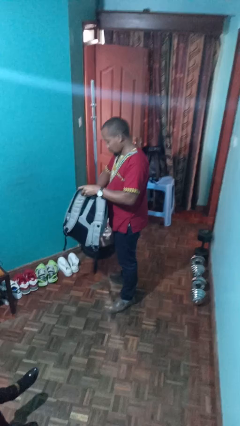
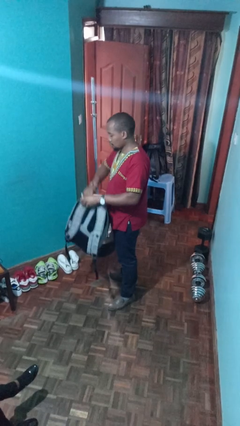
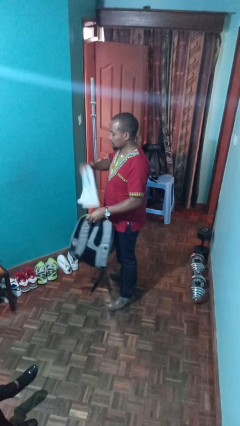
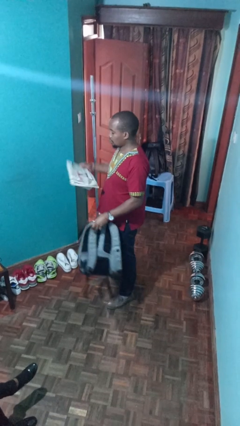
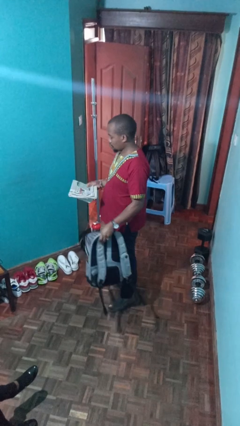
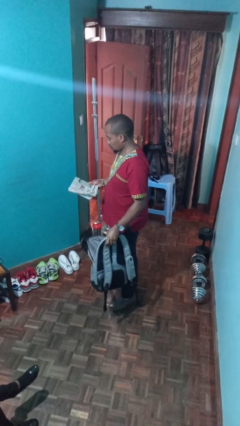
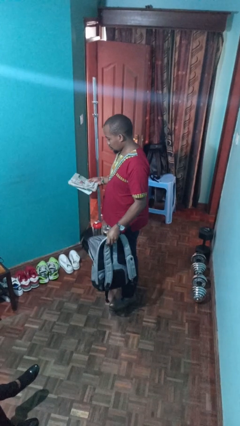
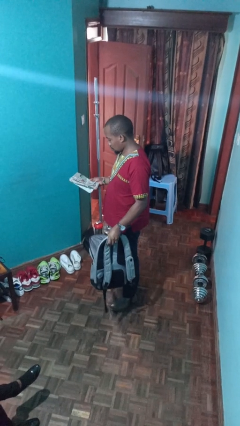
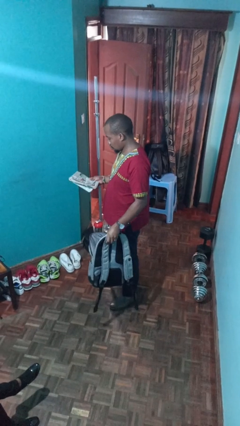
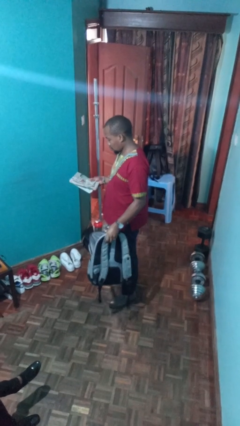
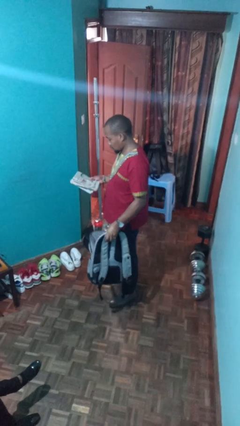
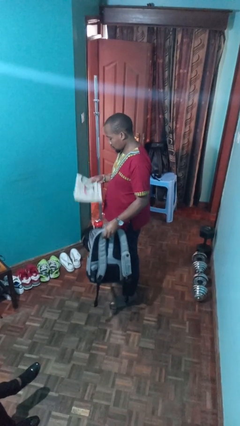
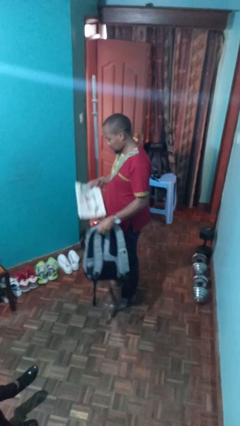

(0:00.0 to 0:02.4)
person takes object from backpack

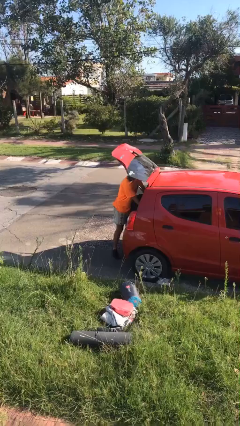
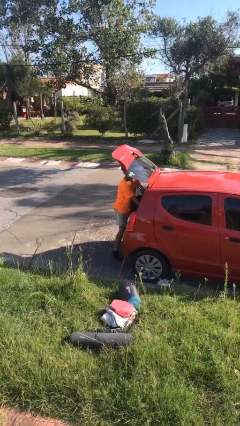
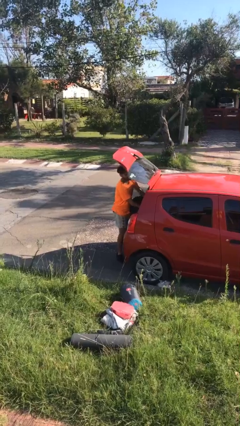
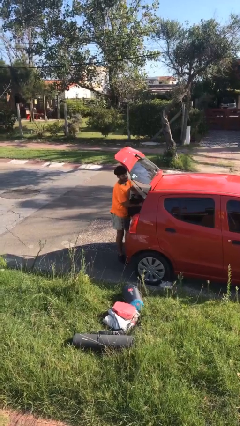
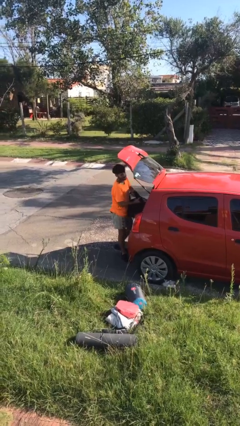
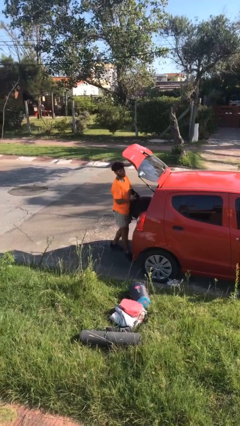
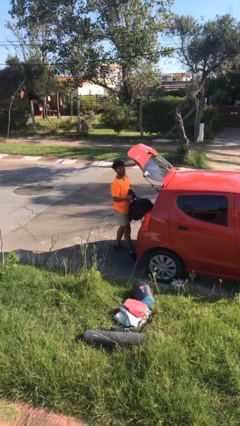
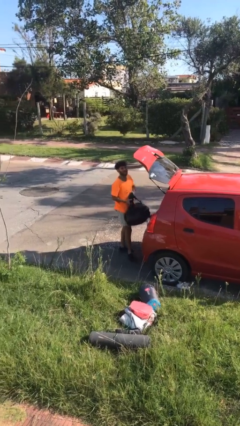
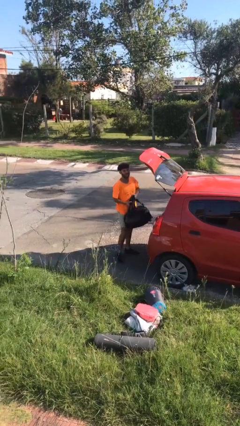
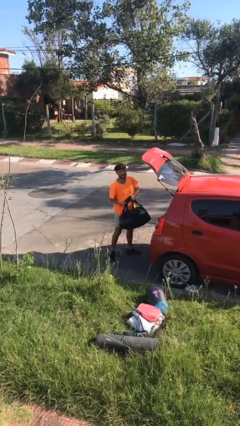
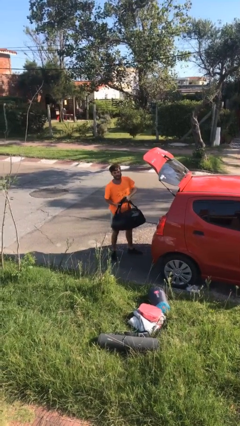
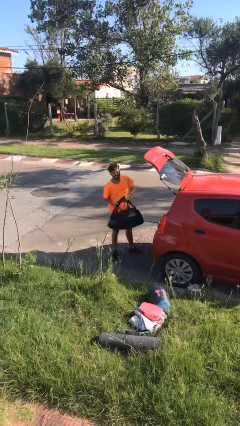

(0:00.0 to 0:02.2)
person unloads car

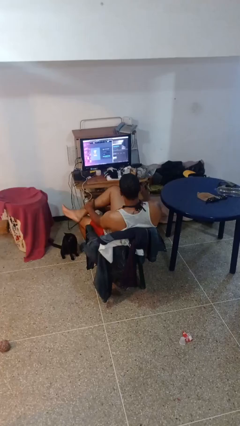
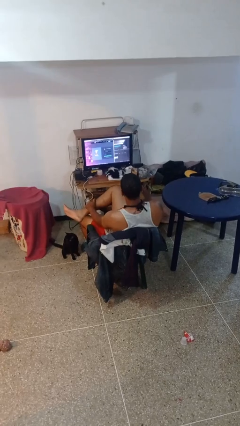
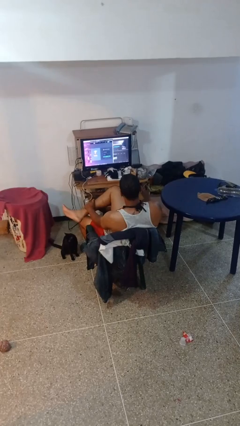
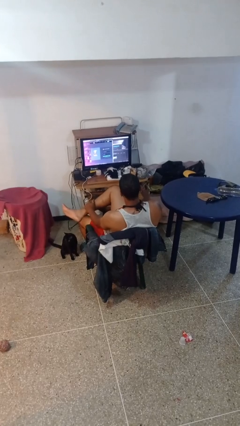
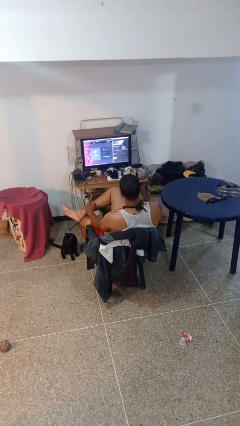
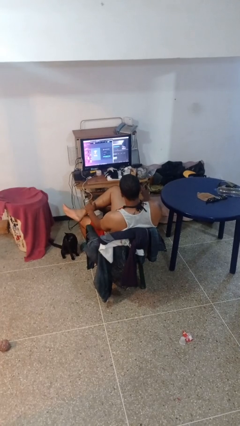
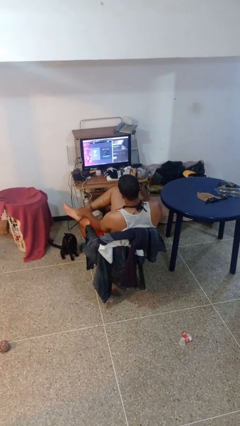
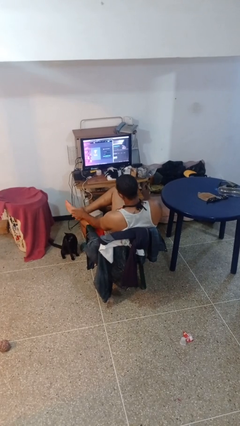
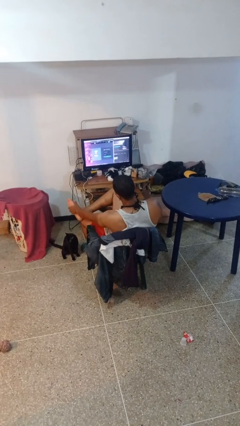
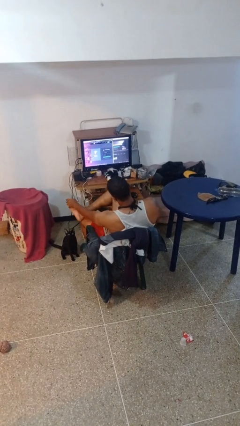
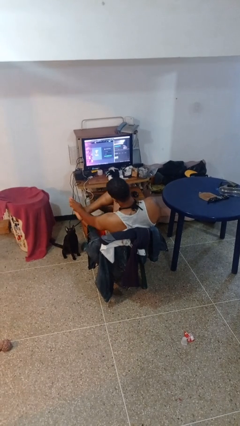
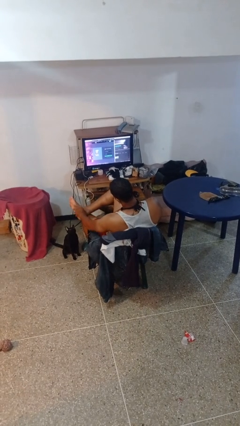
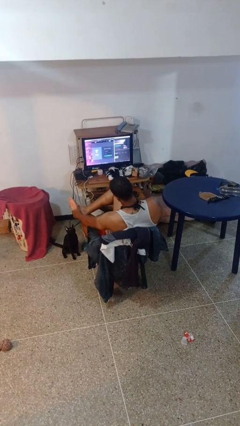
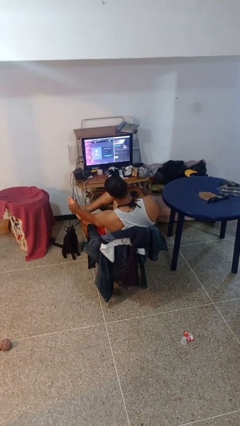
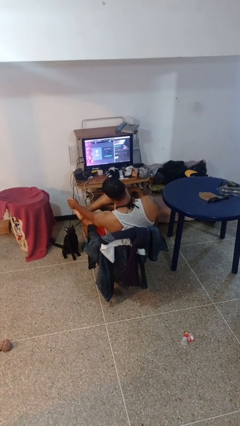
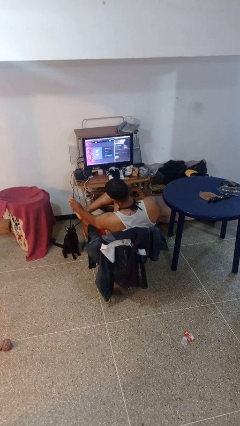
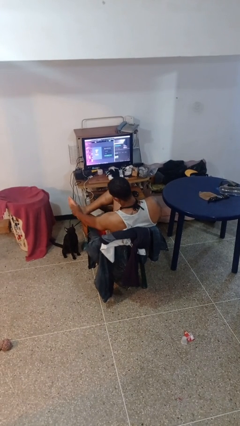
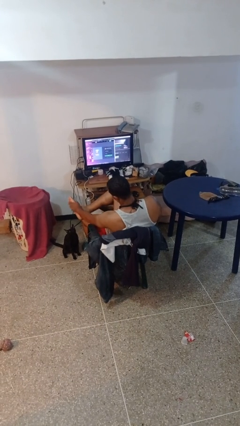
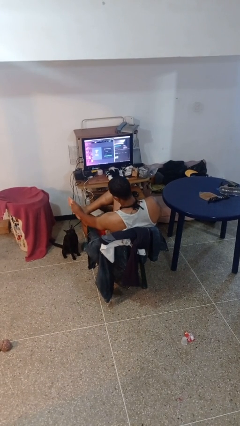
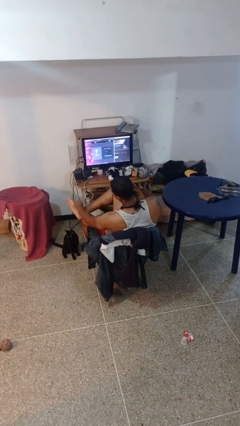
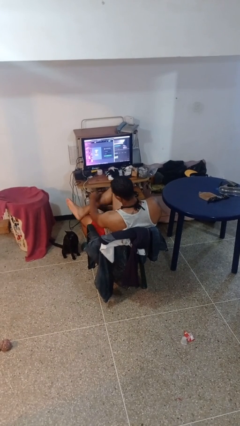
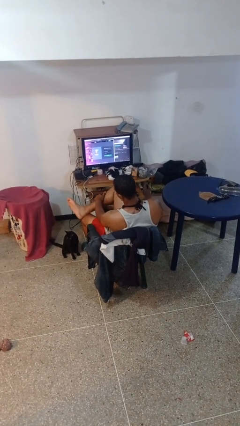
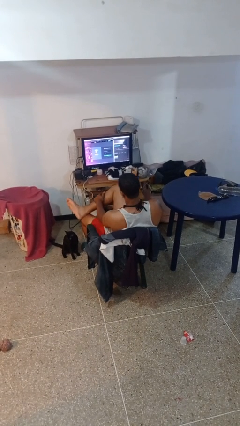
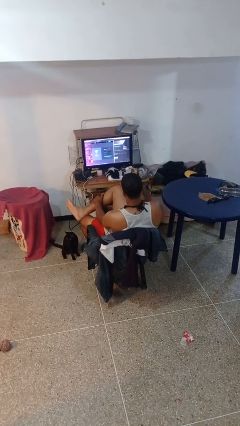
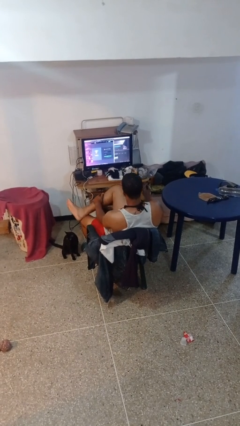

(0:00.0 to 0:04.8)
person rubs foot

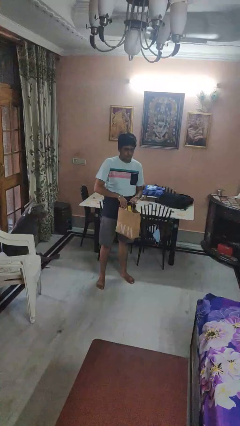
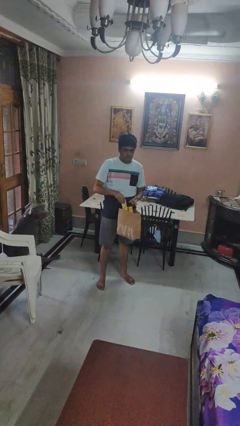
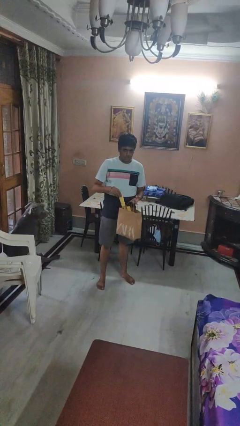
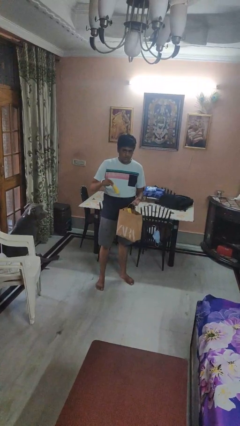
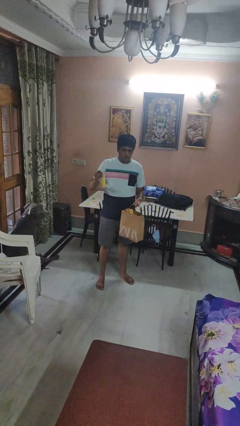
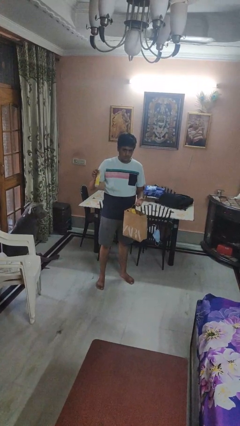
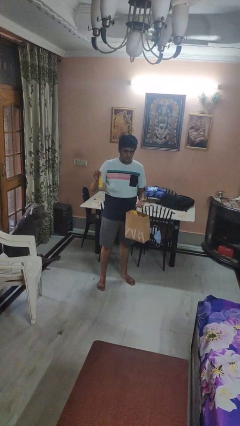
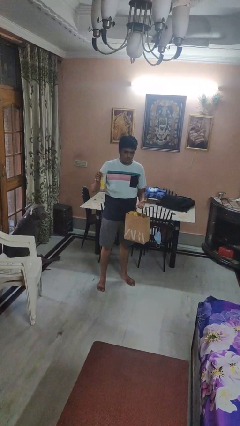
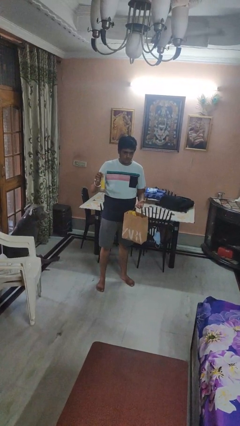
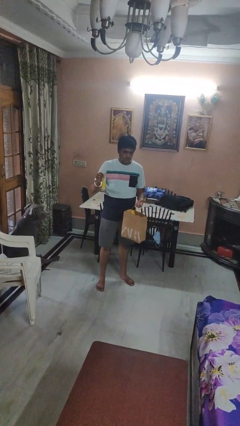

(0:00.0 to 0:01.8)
person takes object from bag

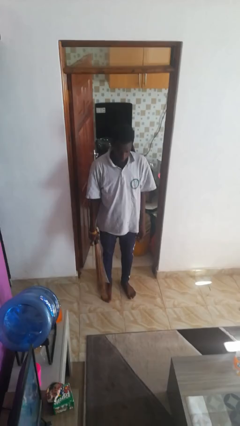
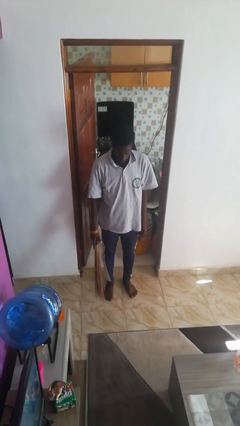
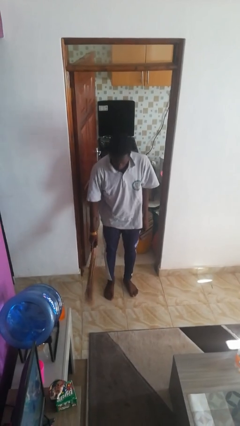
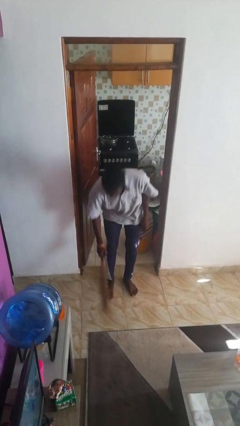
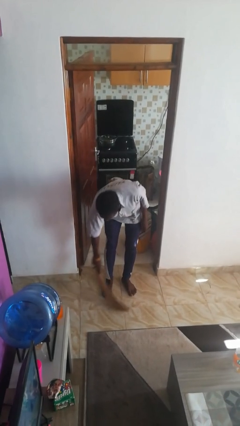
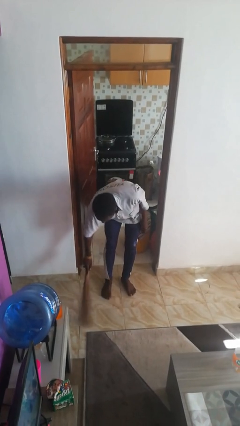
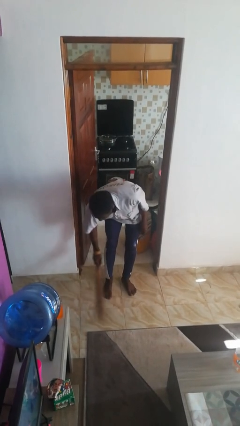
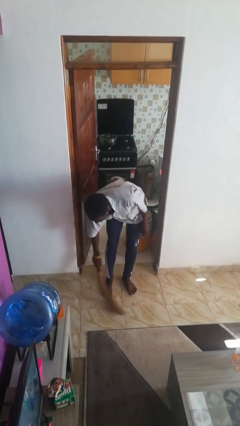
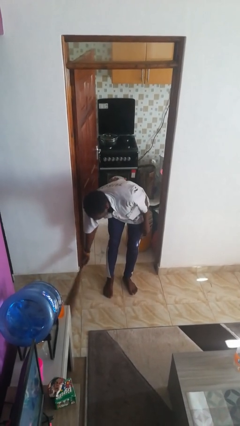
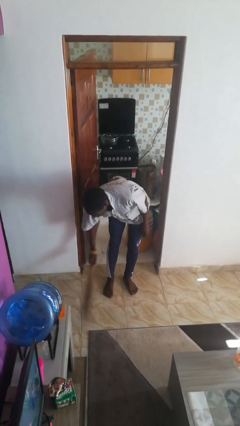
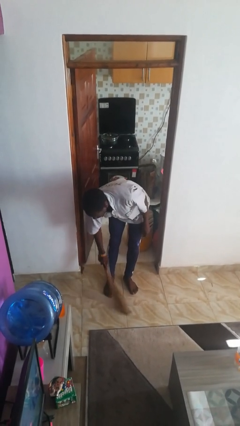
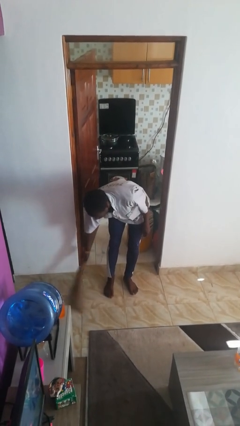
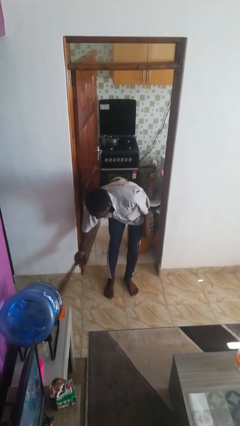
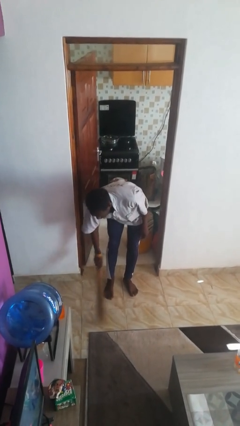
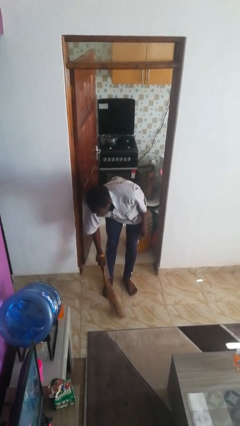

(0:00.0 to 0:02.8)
person sweeps floor

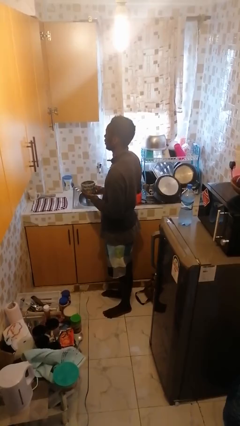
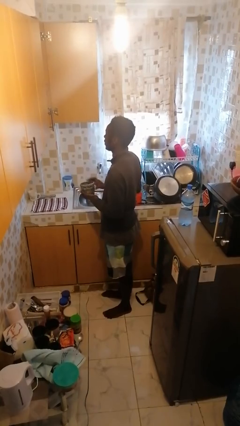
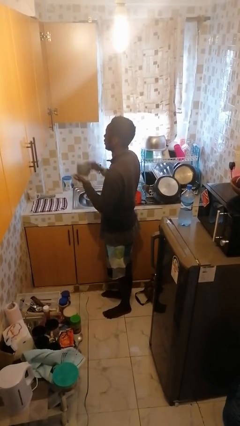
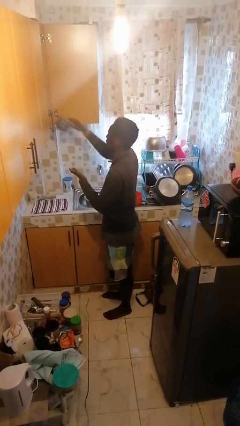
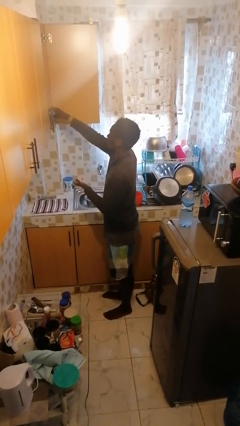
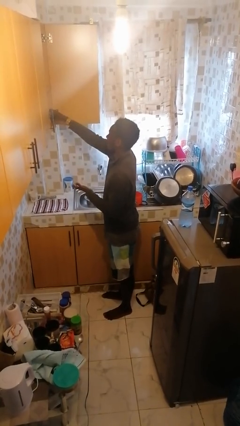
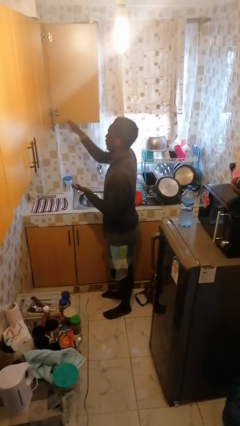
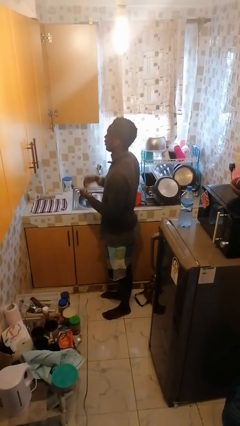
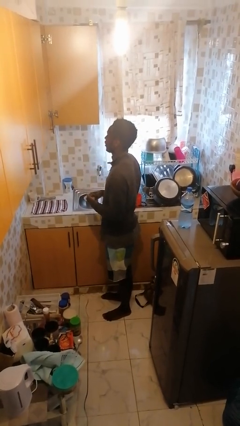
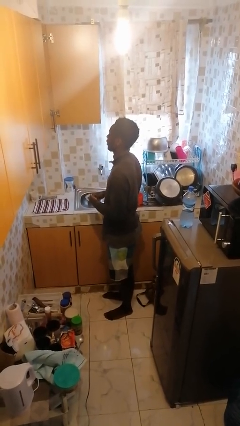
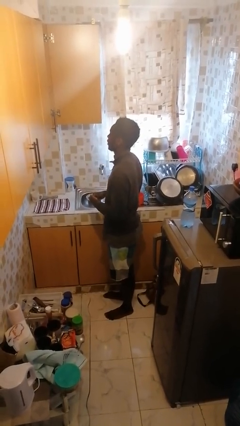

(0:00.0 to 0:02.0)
person puts down object into cabinet

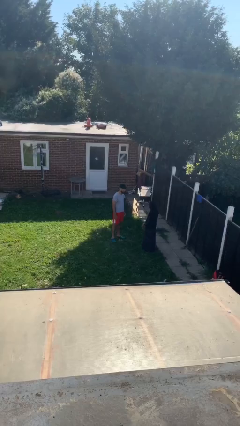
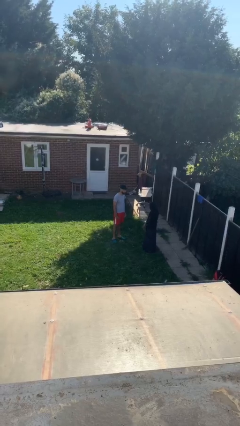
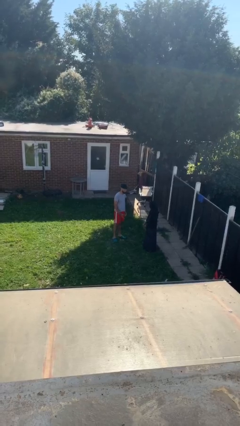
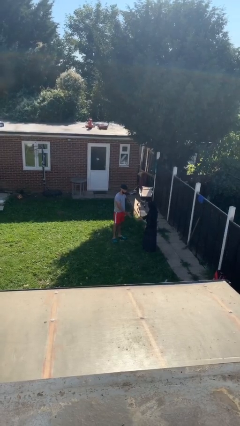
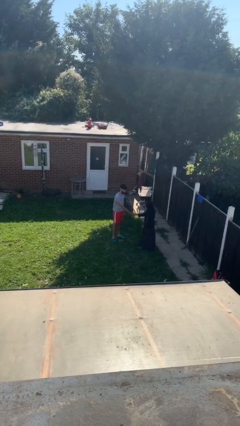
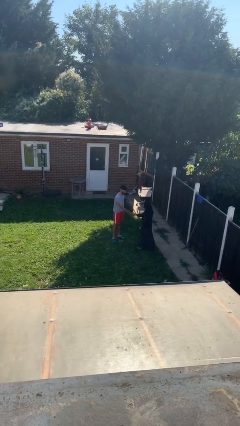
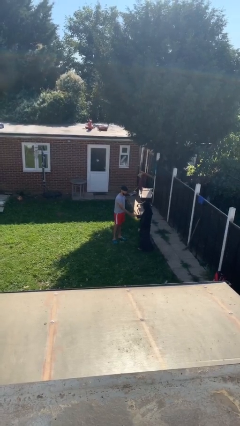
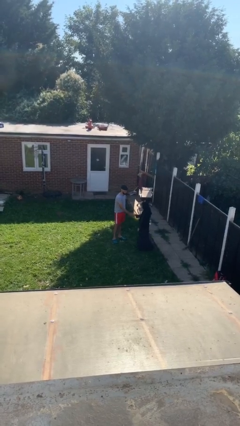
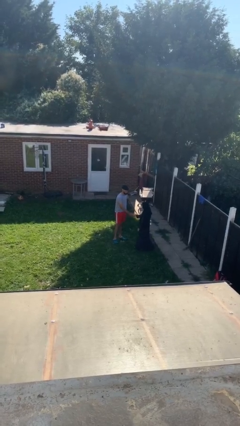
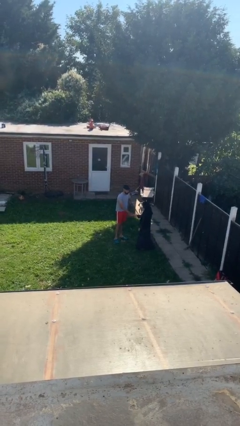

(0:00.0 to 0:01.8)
person shakes hand
